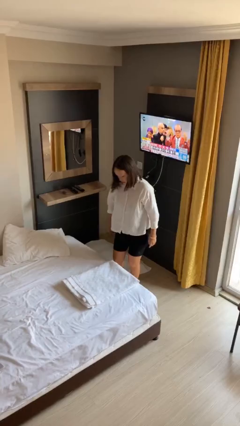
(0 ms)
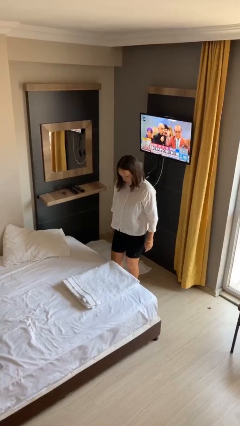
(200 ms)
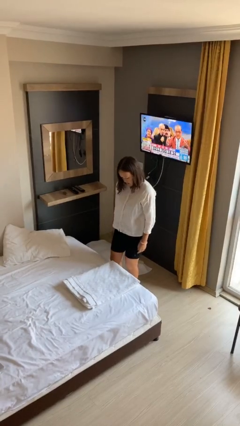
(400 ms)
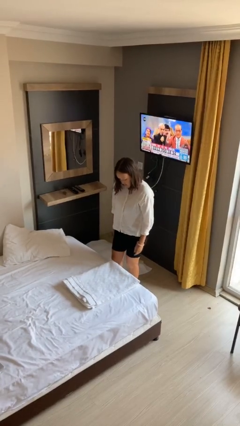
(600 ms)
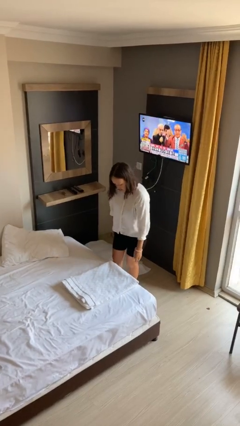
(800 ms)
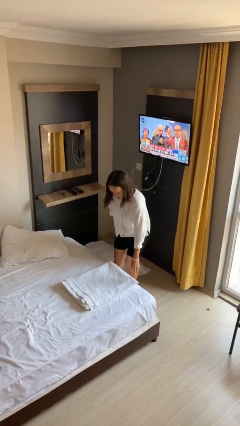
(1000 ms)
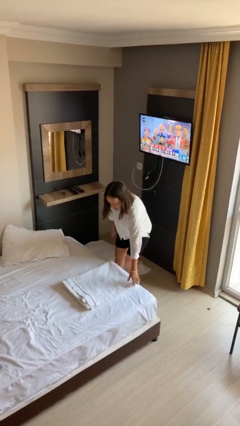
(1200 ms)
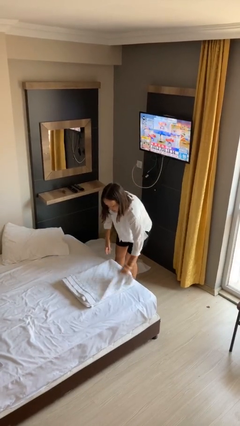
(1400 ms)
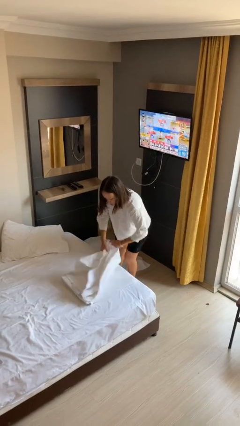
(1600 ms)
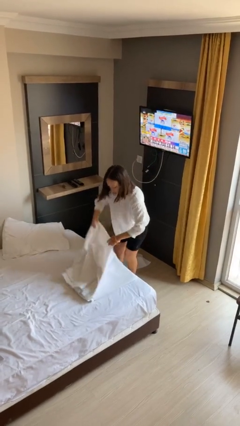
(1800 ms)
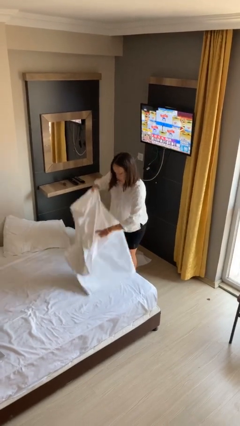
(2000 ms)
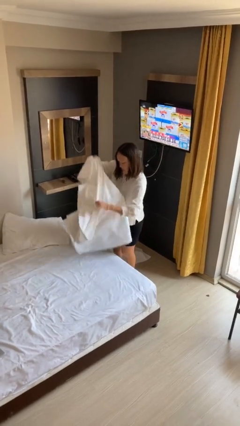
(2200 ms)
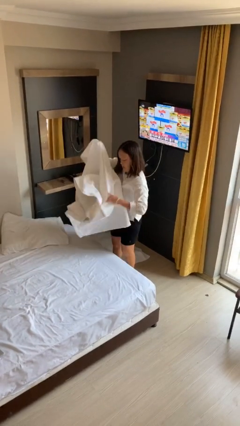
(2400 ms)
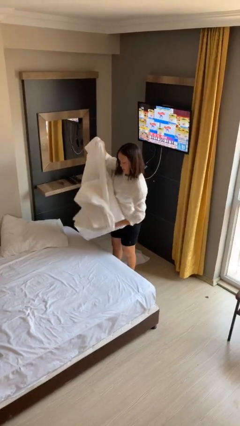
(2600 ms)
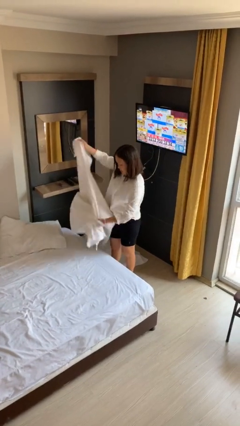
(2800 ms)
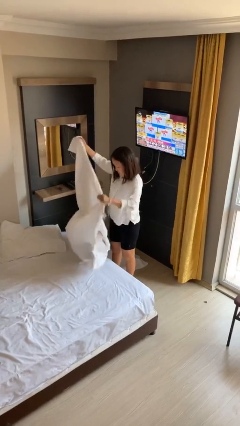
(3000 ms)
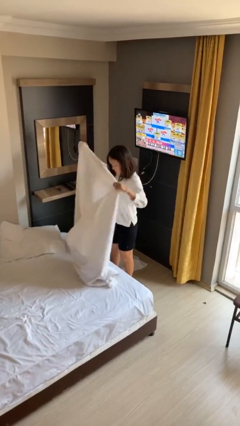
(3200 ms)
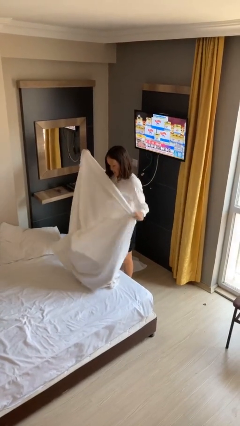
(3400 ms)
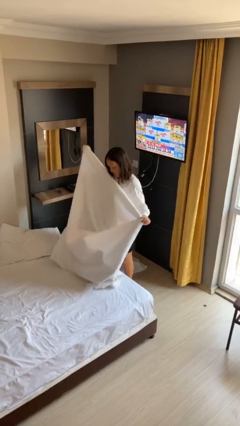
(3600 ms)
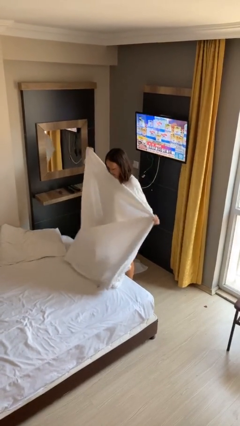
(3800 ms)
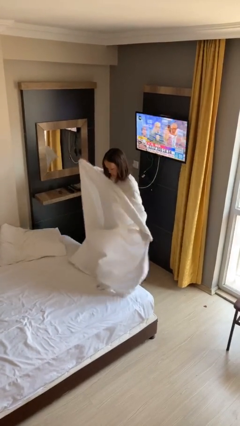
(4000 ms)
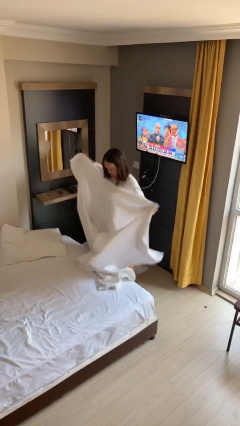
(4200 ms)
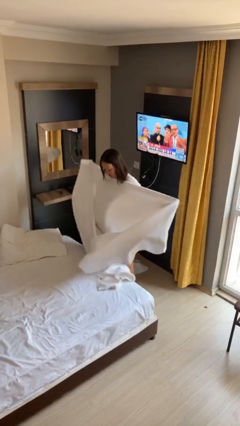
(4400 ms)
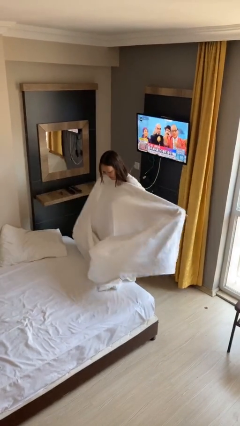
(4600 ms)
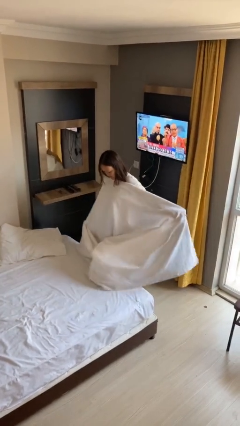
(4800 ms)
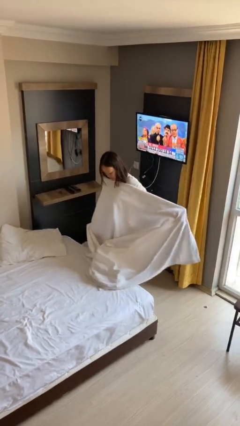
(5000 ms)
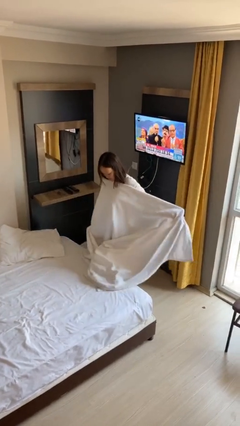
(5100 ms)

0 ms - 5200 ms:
person unfolds blanket

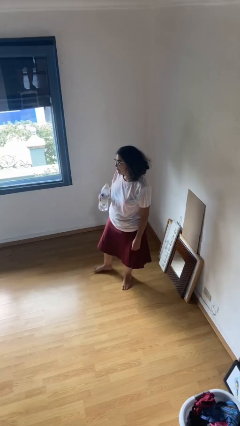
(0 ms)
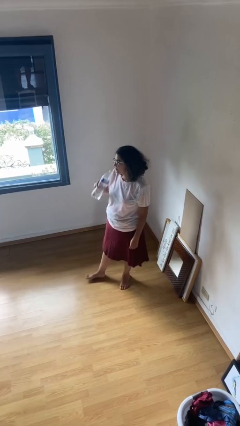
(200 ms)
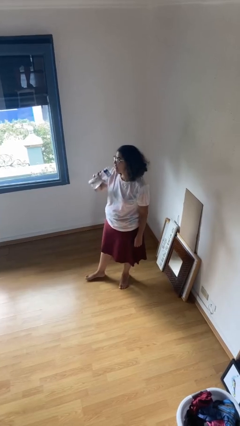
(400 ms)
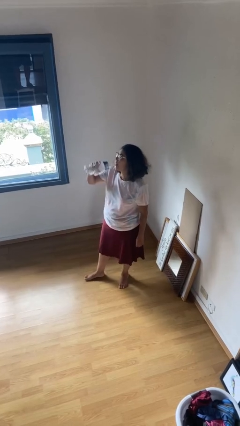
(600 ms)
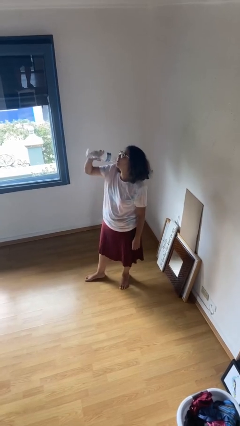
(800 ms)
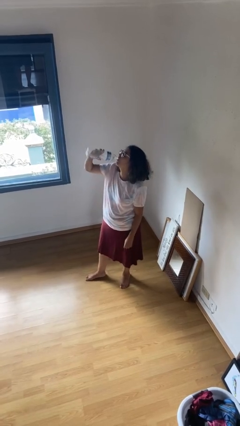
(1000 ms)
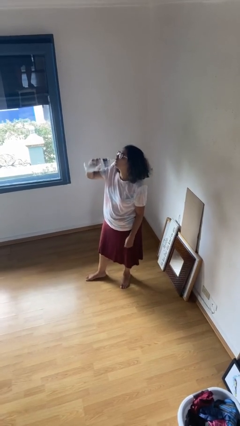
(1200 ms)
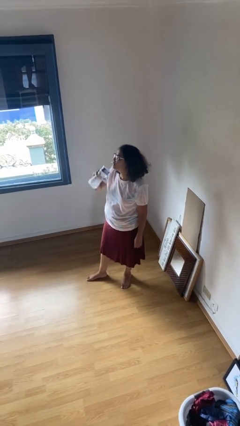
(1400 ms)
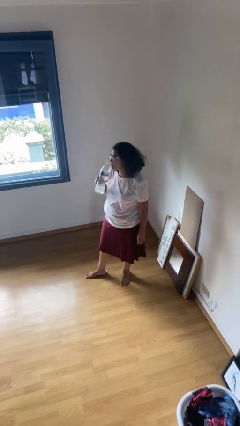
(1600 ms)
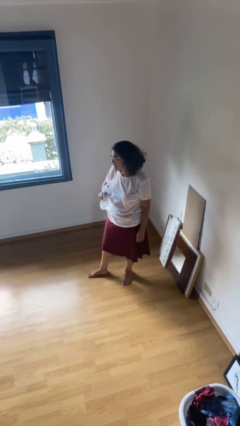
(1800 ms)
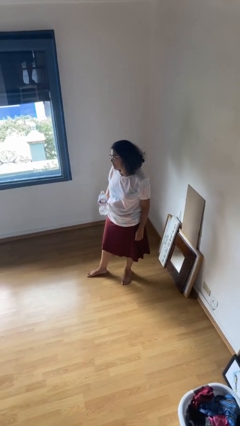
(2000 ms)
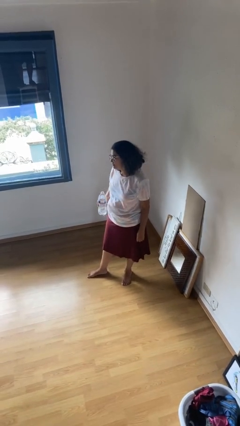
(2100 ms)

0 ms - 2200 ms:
person drinks from bottle

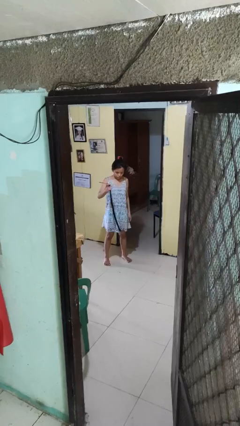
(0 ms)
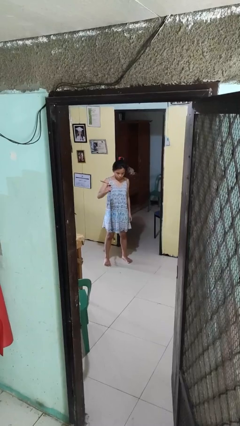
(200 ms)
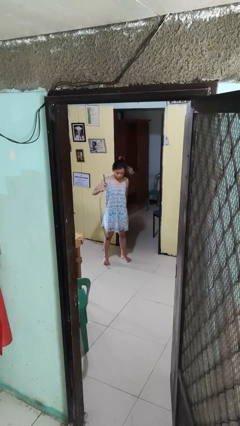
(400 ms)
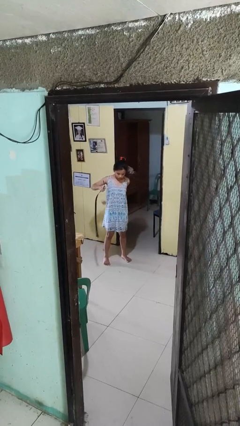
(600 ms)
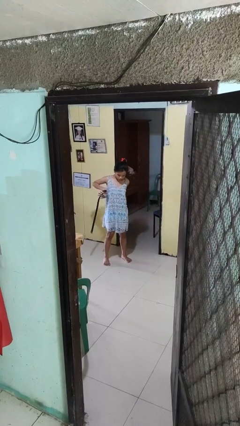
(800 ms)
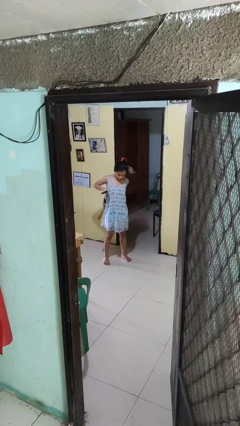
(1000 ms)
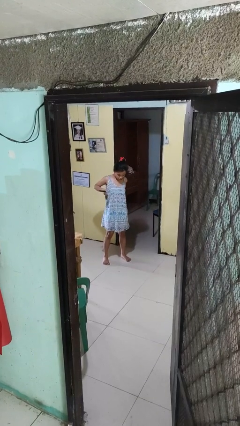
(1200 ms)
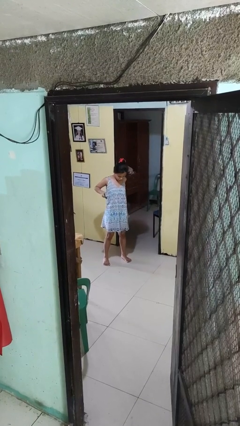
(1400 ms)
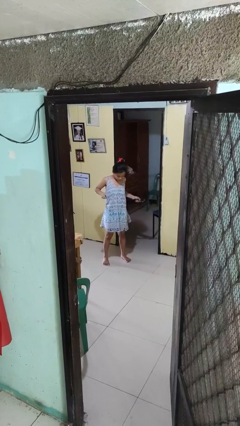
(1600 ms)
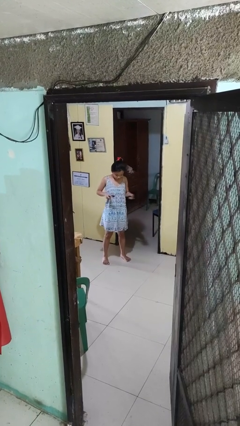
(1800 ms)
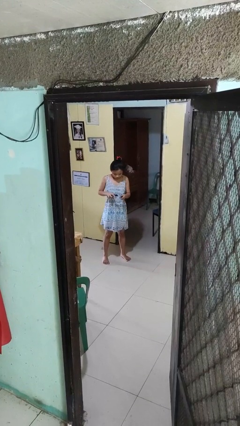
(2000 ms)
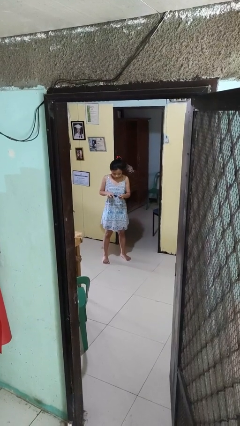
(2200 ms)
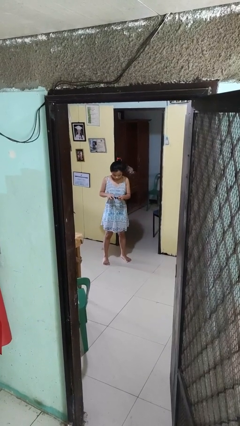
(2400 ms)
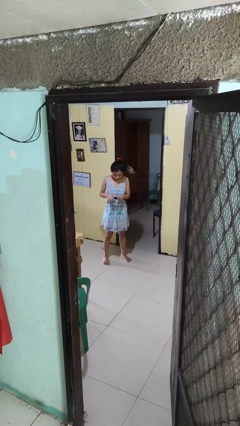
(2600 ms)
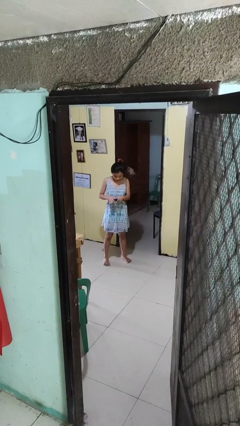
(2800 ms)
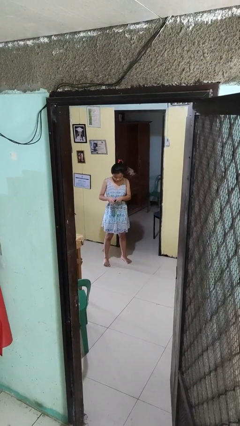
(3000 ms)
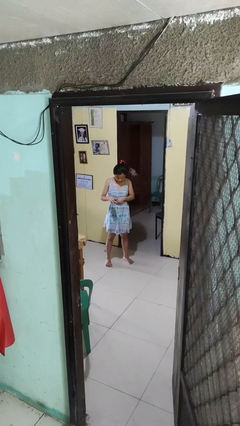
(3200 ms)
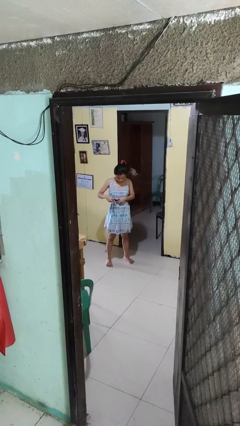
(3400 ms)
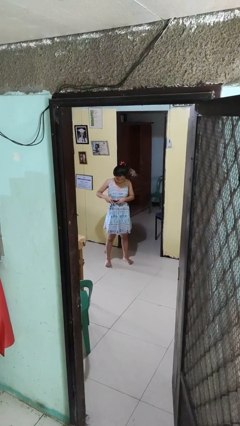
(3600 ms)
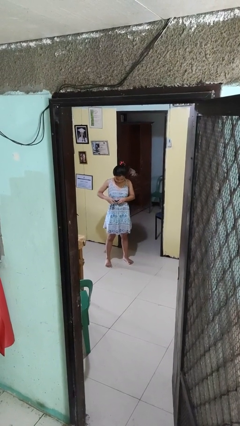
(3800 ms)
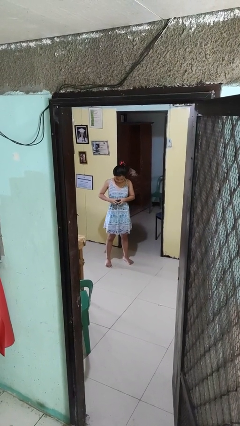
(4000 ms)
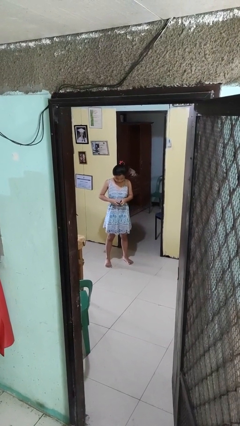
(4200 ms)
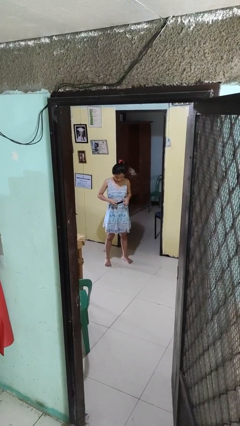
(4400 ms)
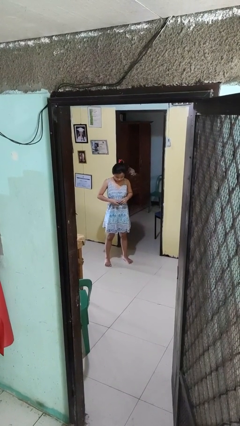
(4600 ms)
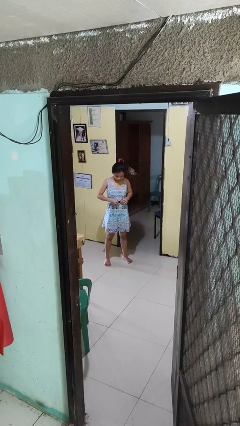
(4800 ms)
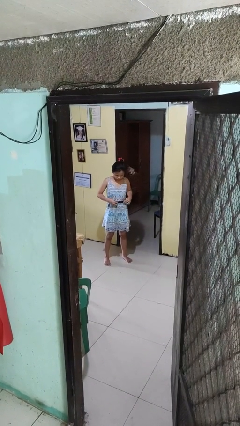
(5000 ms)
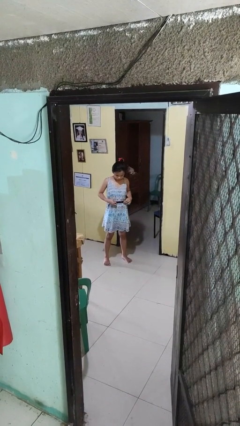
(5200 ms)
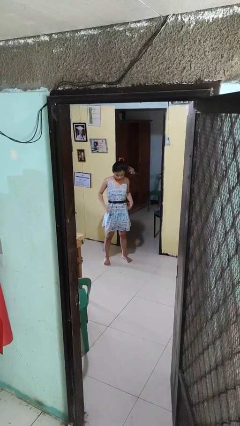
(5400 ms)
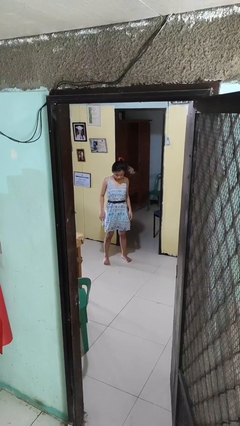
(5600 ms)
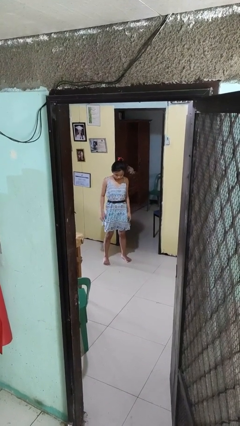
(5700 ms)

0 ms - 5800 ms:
person puts on belt

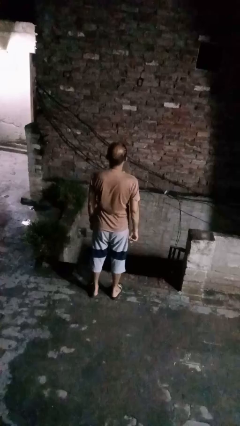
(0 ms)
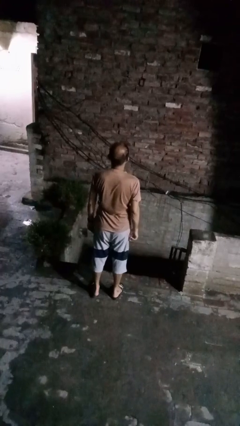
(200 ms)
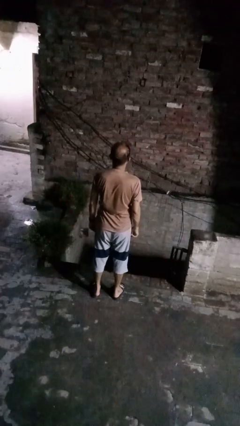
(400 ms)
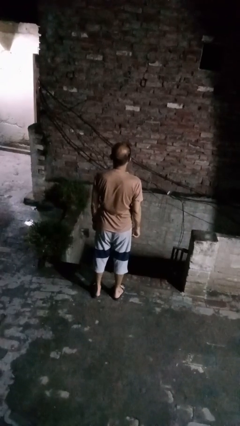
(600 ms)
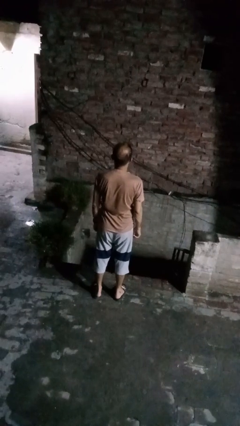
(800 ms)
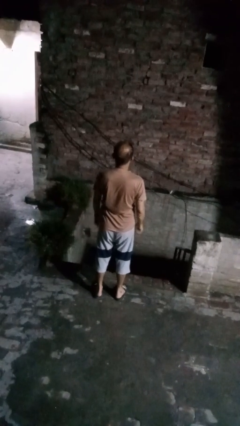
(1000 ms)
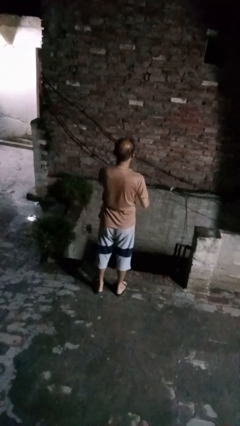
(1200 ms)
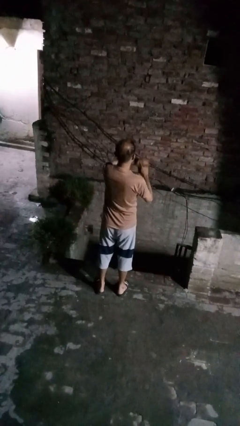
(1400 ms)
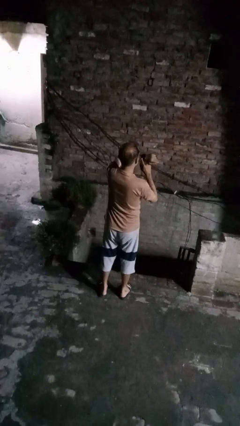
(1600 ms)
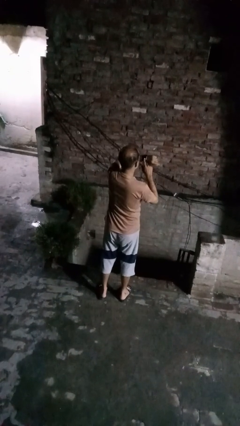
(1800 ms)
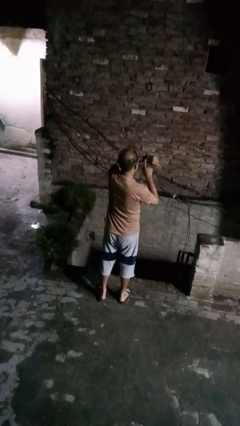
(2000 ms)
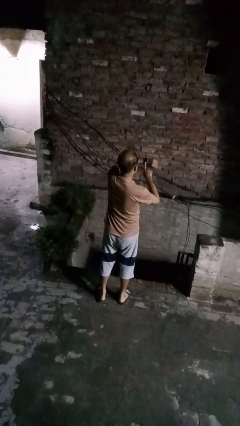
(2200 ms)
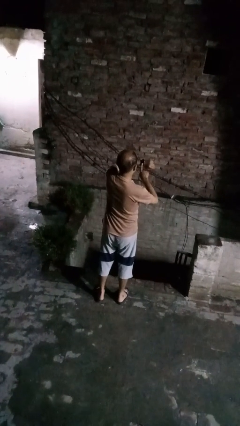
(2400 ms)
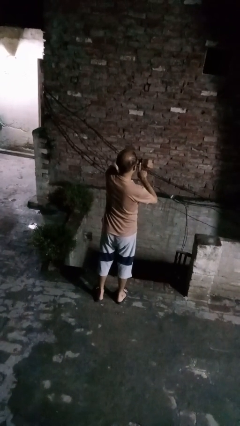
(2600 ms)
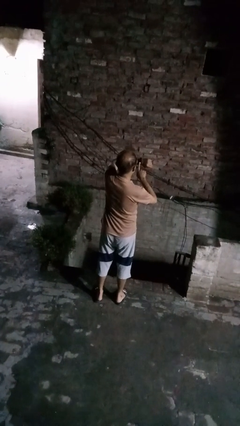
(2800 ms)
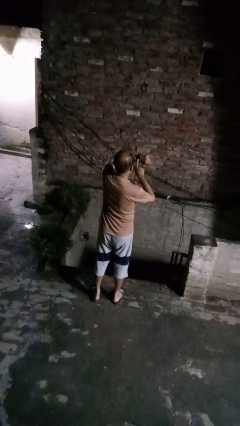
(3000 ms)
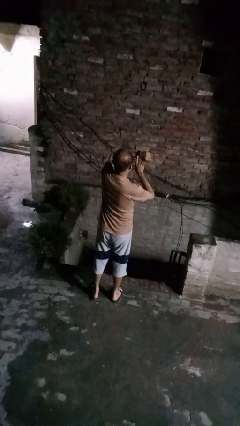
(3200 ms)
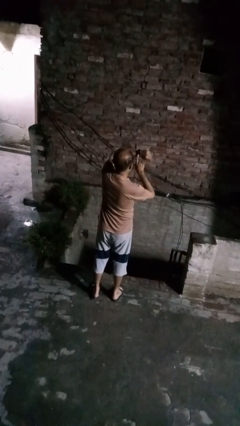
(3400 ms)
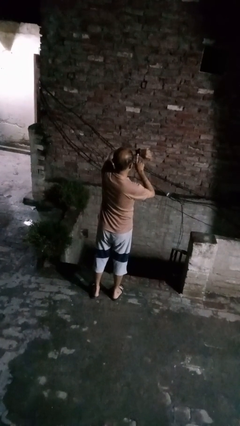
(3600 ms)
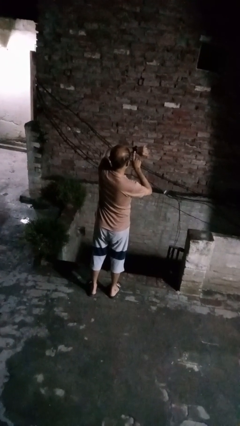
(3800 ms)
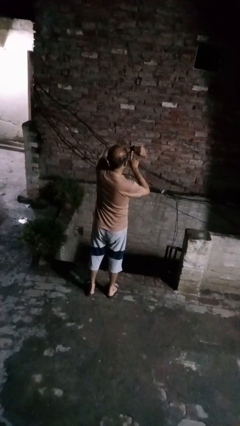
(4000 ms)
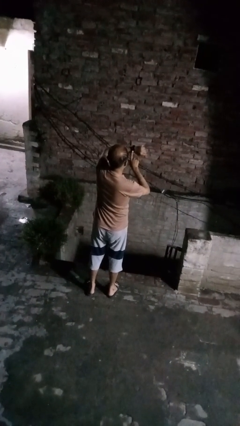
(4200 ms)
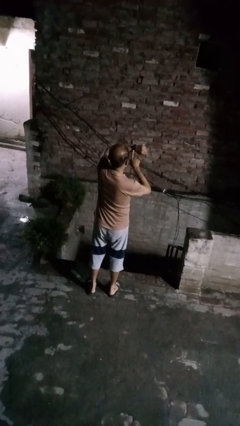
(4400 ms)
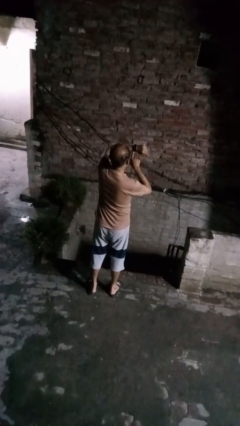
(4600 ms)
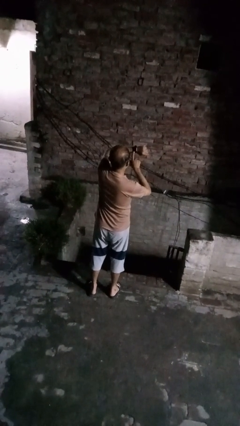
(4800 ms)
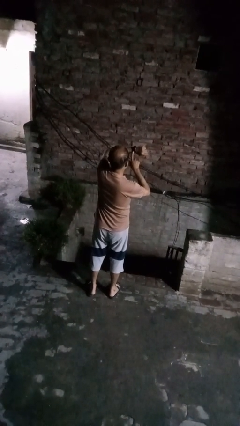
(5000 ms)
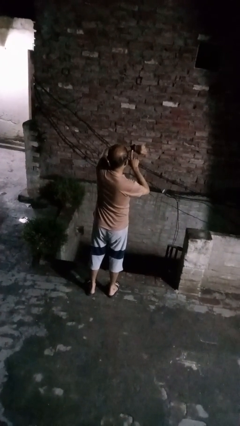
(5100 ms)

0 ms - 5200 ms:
person gestures watch closely
